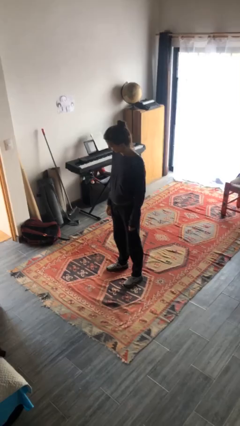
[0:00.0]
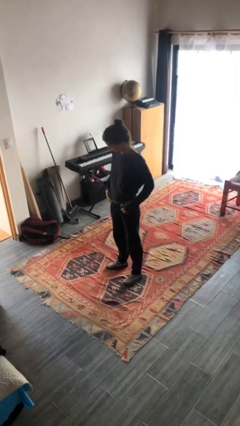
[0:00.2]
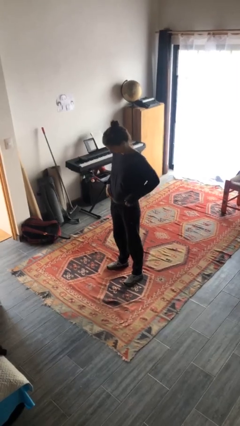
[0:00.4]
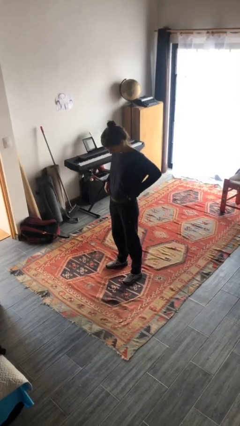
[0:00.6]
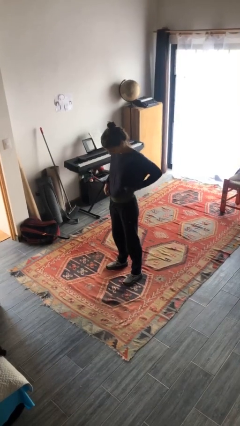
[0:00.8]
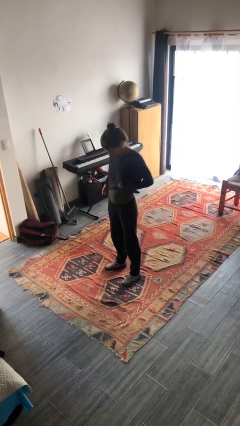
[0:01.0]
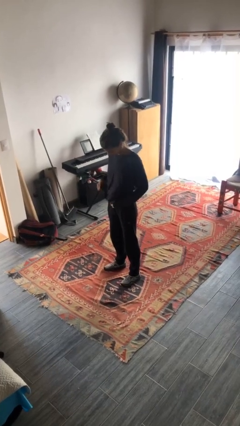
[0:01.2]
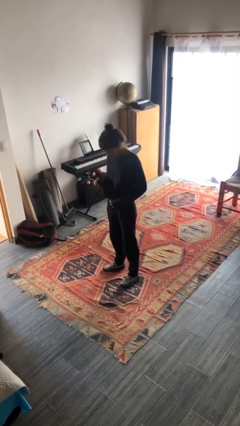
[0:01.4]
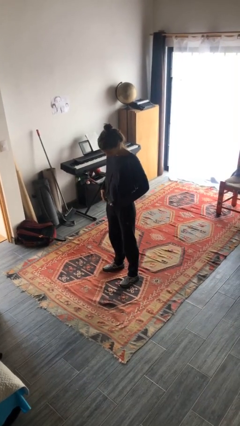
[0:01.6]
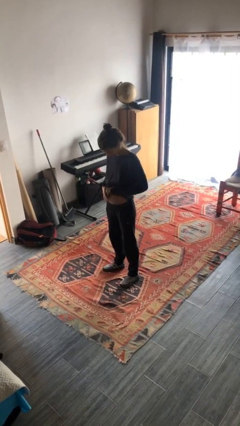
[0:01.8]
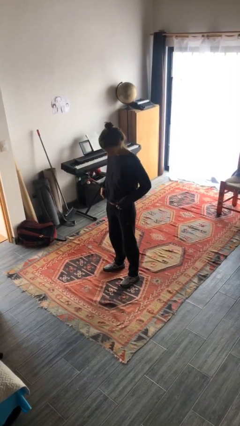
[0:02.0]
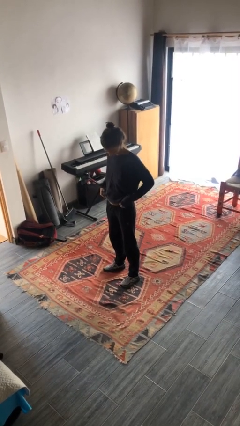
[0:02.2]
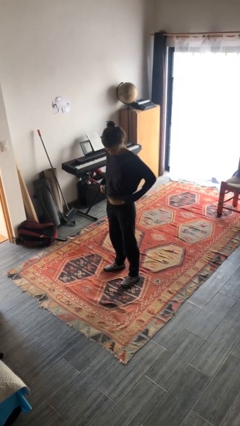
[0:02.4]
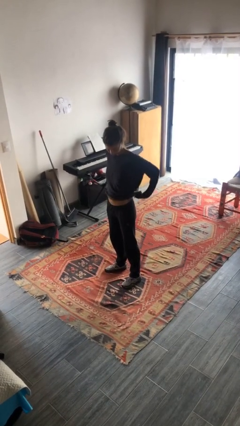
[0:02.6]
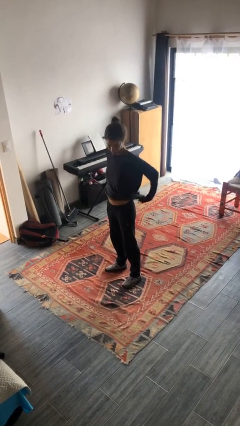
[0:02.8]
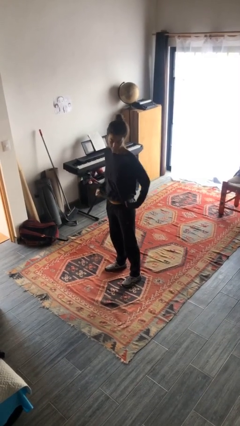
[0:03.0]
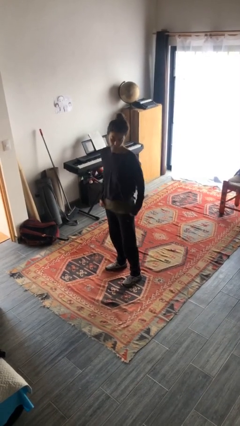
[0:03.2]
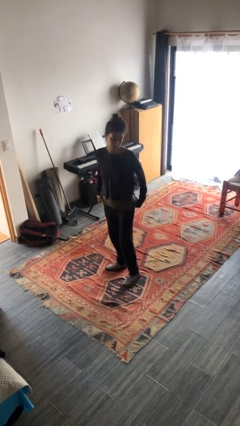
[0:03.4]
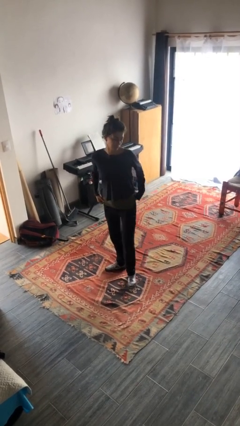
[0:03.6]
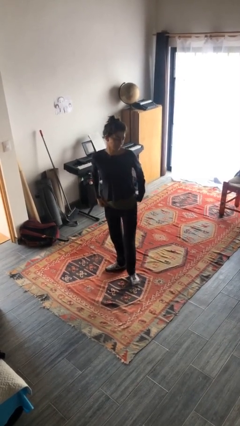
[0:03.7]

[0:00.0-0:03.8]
person untucks shirt

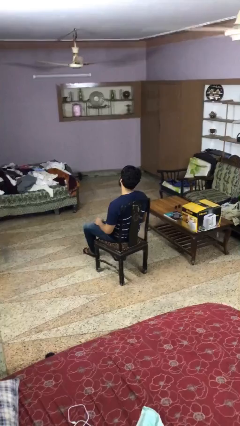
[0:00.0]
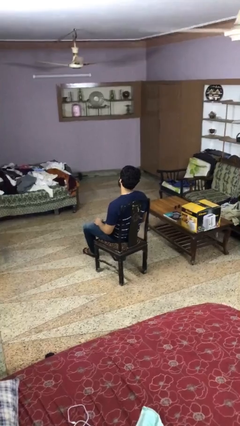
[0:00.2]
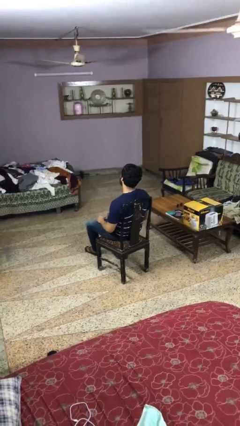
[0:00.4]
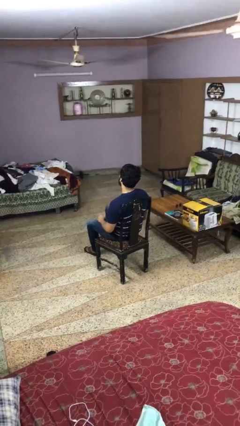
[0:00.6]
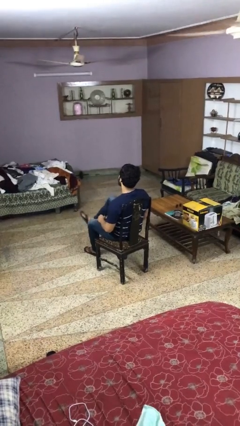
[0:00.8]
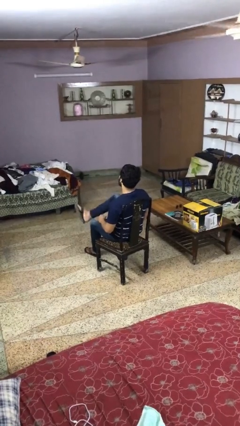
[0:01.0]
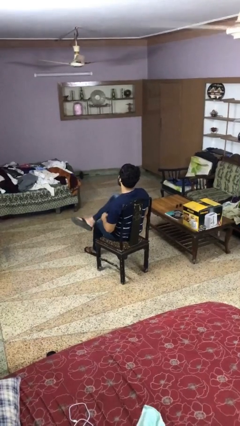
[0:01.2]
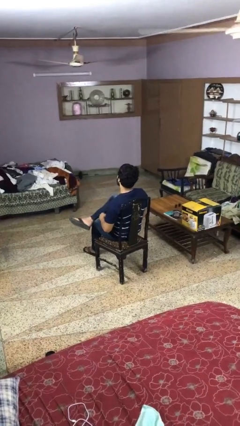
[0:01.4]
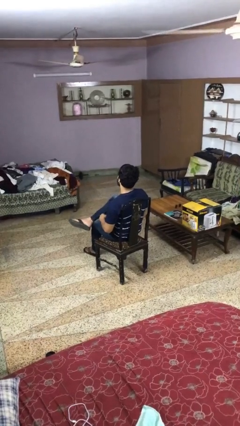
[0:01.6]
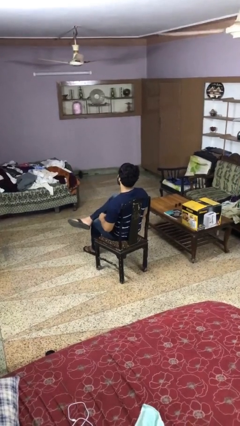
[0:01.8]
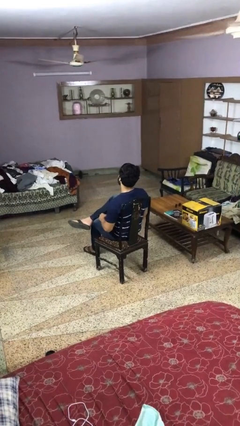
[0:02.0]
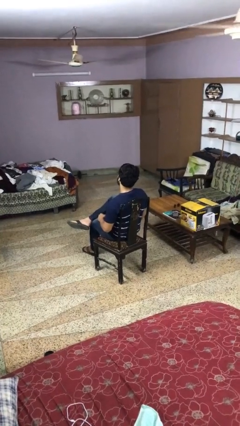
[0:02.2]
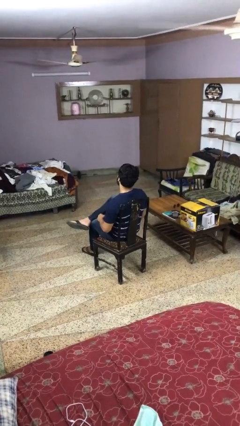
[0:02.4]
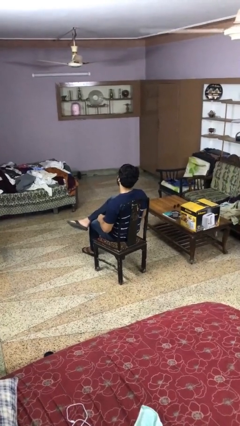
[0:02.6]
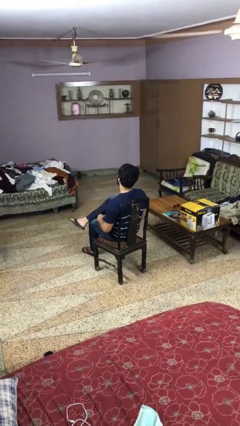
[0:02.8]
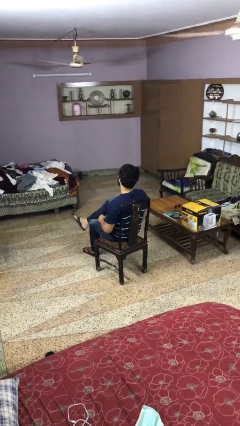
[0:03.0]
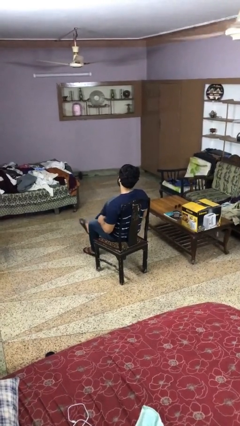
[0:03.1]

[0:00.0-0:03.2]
person crosses legs

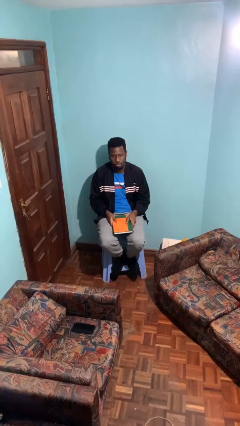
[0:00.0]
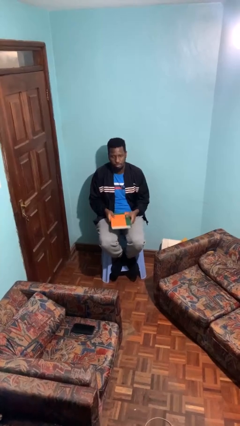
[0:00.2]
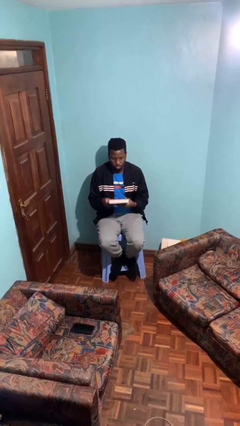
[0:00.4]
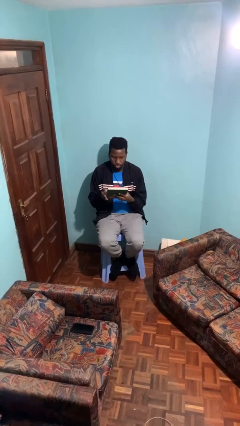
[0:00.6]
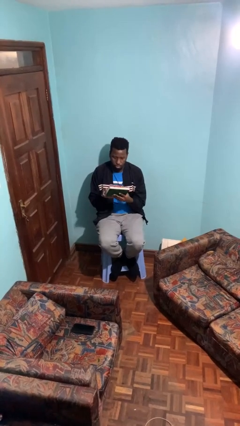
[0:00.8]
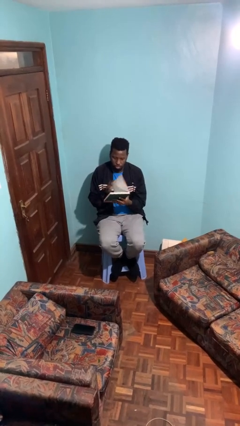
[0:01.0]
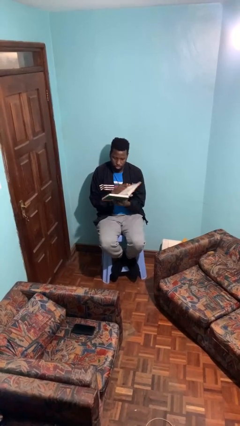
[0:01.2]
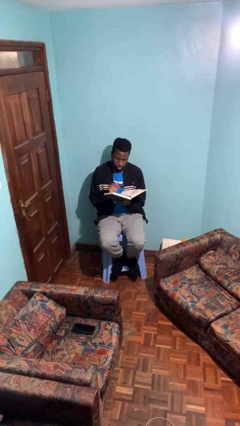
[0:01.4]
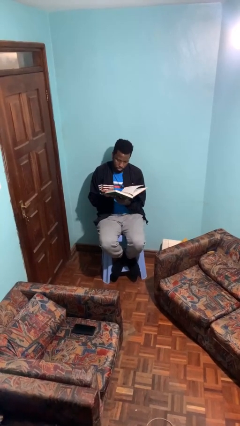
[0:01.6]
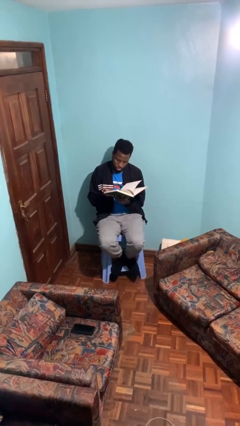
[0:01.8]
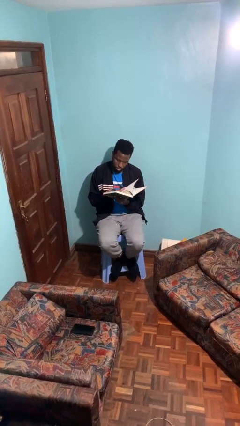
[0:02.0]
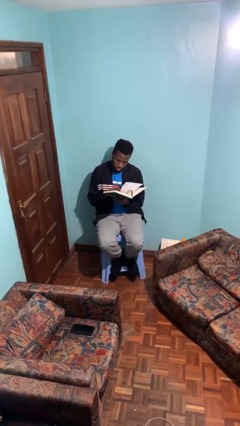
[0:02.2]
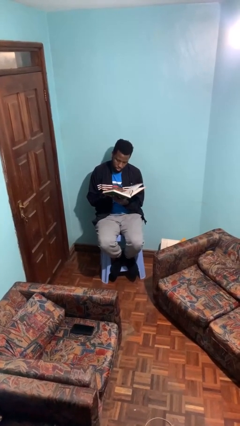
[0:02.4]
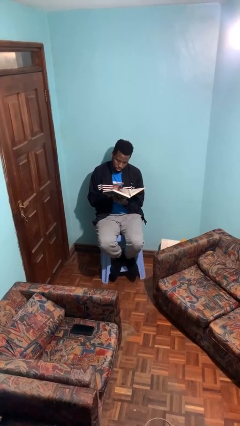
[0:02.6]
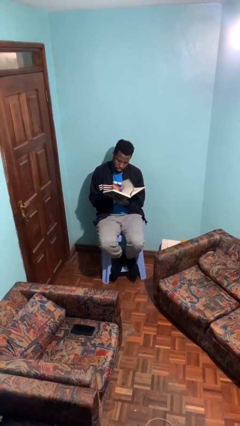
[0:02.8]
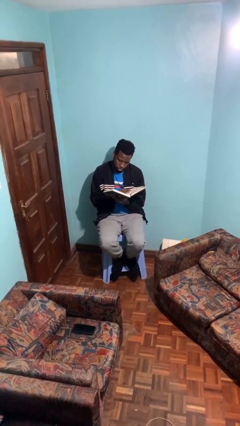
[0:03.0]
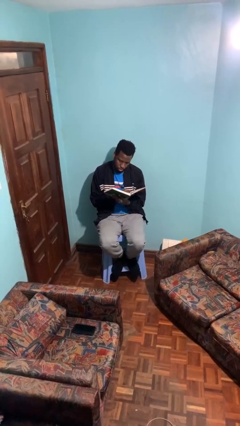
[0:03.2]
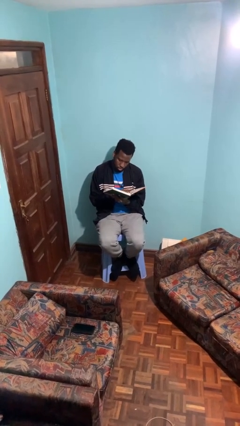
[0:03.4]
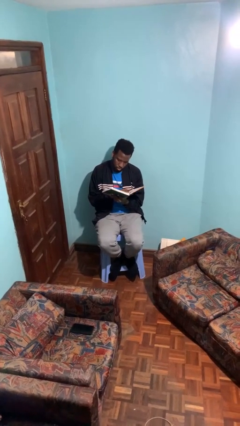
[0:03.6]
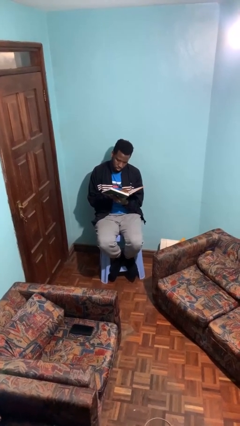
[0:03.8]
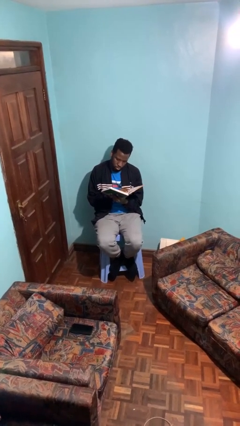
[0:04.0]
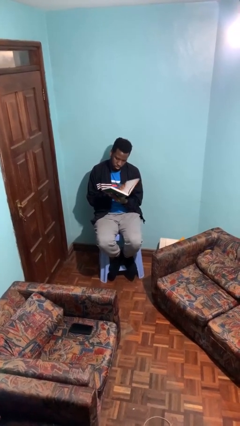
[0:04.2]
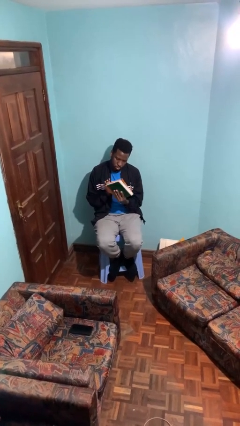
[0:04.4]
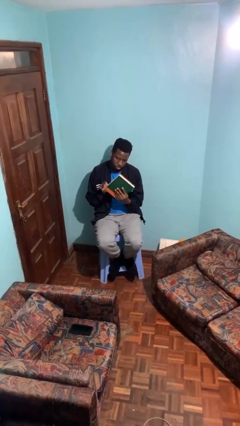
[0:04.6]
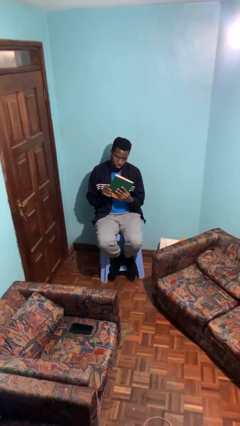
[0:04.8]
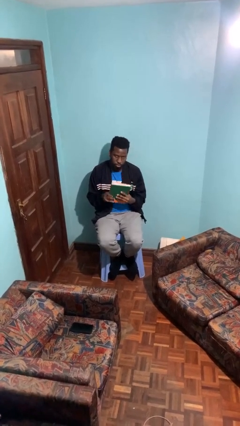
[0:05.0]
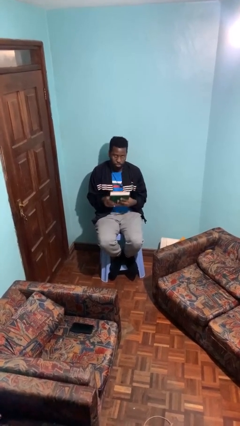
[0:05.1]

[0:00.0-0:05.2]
person reads book

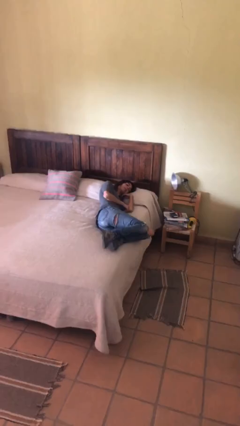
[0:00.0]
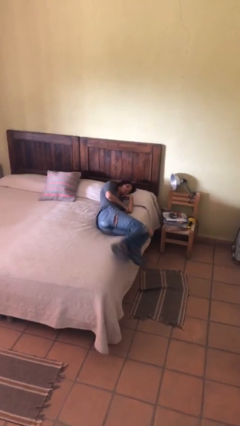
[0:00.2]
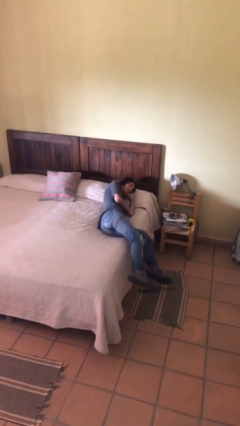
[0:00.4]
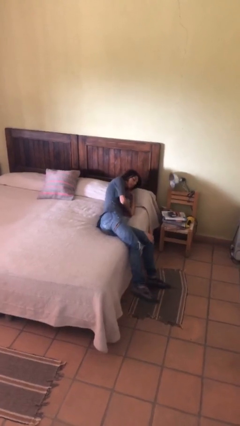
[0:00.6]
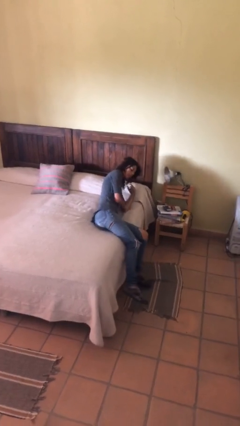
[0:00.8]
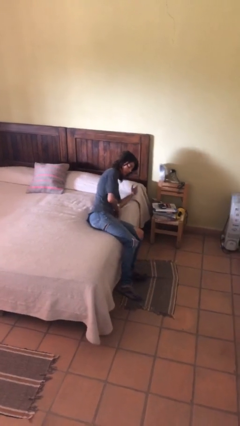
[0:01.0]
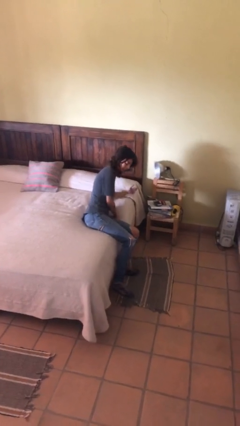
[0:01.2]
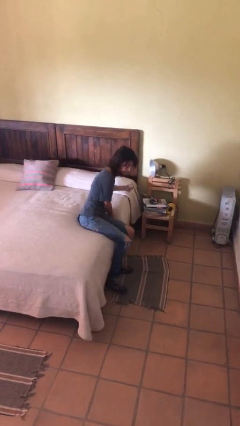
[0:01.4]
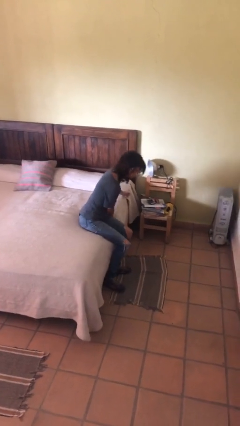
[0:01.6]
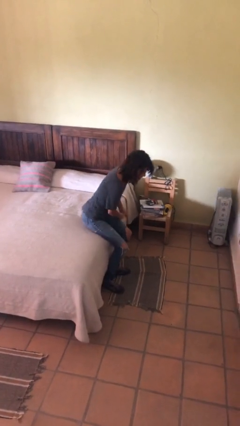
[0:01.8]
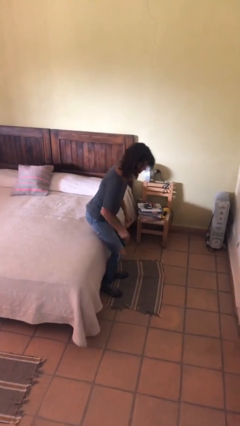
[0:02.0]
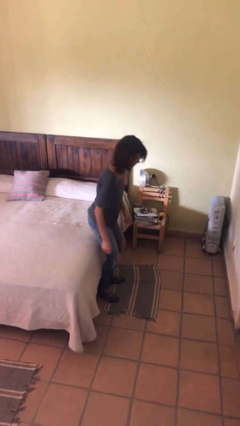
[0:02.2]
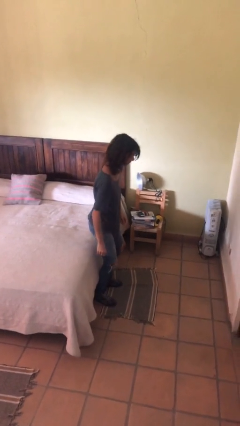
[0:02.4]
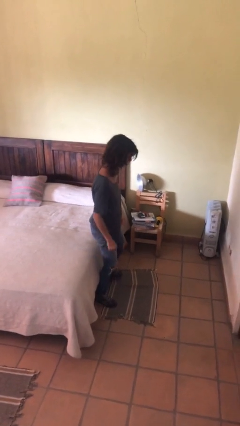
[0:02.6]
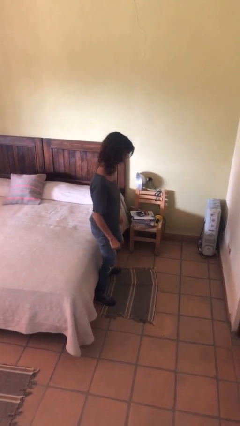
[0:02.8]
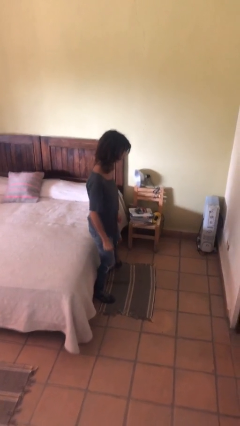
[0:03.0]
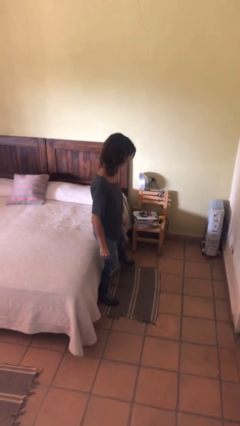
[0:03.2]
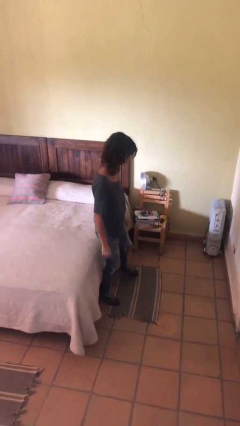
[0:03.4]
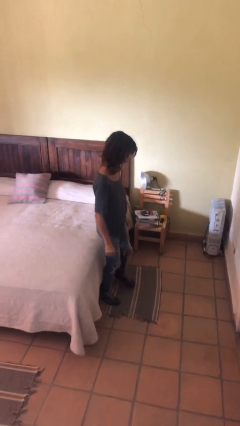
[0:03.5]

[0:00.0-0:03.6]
person stands up

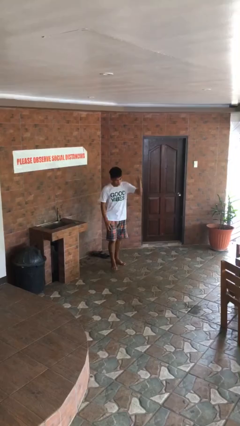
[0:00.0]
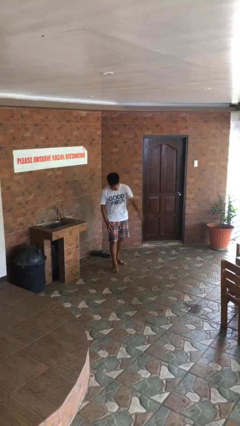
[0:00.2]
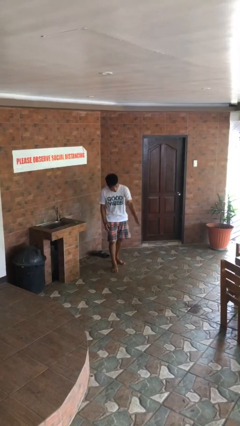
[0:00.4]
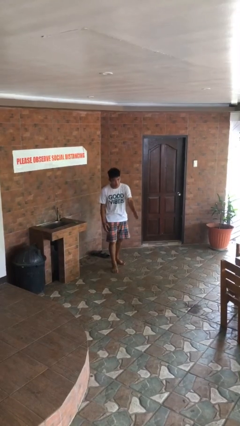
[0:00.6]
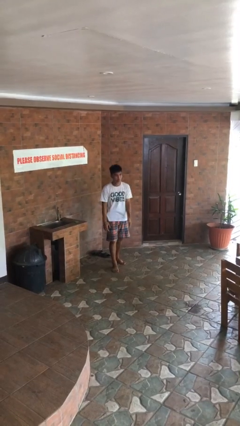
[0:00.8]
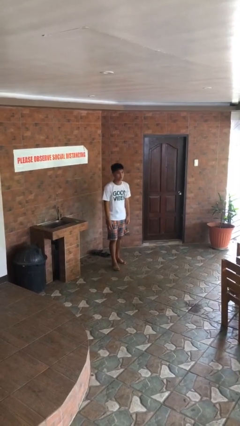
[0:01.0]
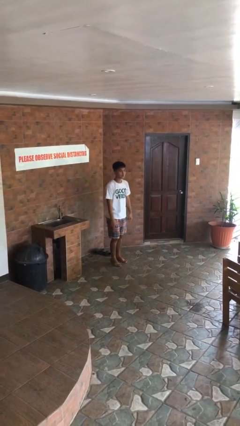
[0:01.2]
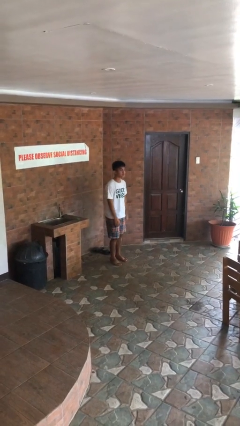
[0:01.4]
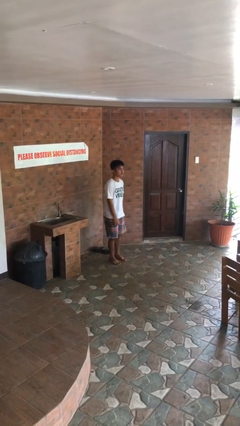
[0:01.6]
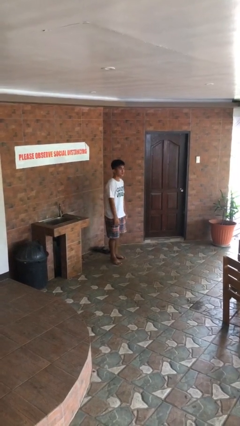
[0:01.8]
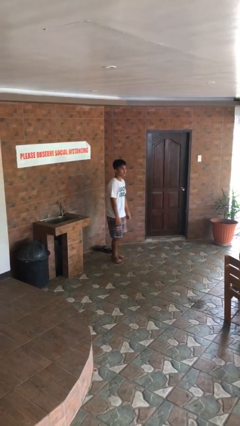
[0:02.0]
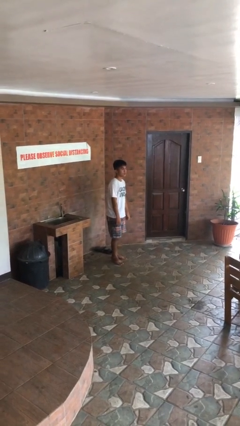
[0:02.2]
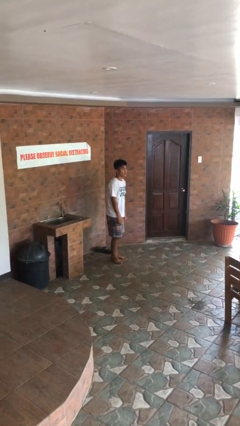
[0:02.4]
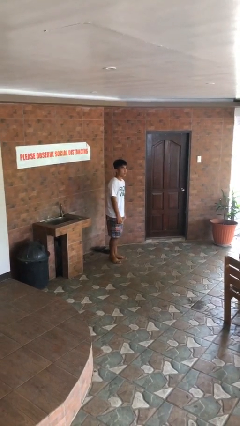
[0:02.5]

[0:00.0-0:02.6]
person karate chop
